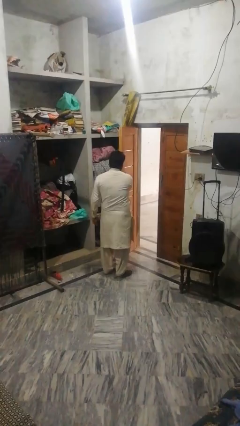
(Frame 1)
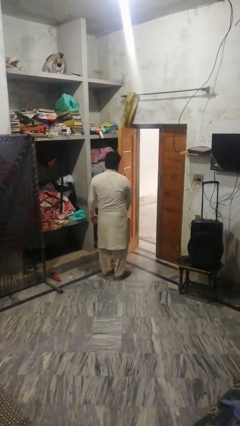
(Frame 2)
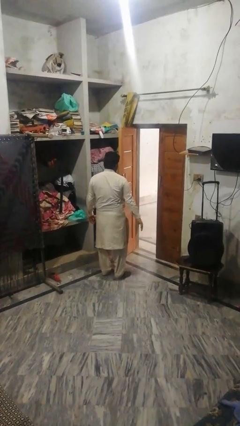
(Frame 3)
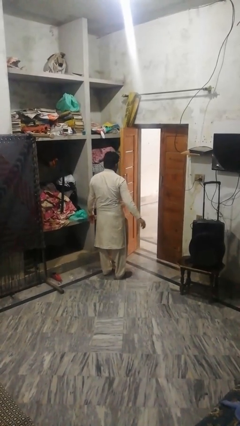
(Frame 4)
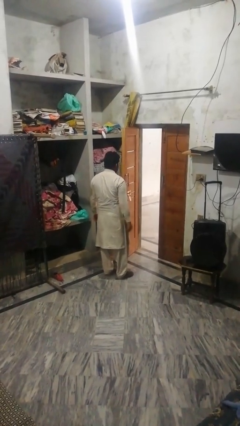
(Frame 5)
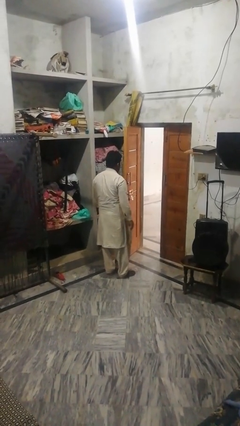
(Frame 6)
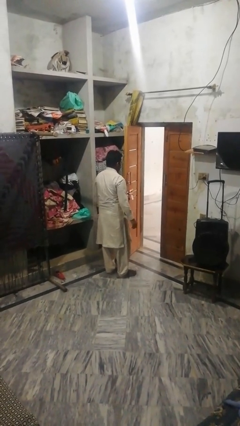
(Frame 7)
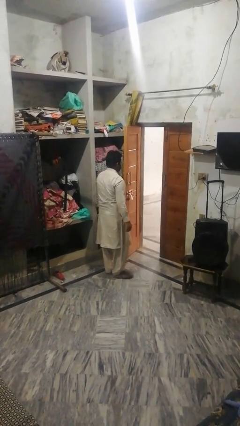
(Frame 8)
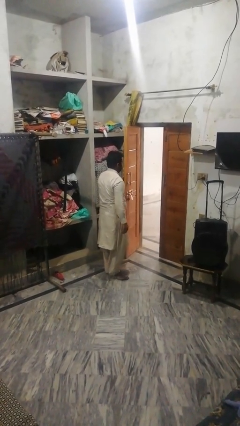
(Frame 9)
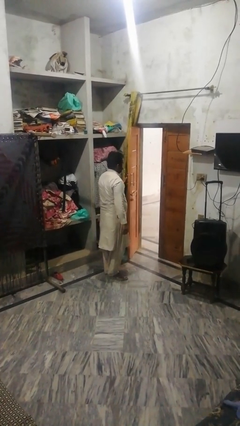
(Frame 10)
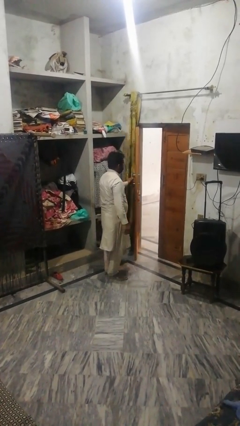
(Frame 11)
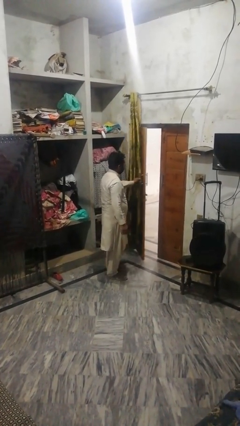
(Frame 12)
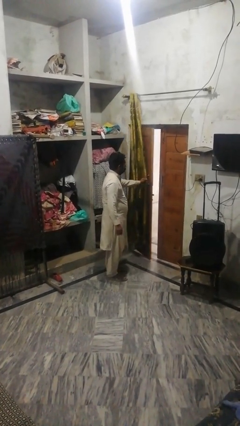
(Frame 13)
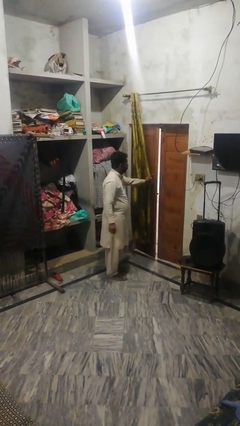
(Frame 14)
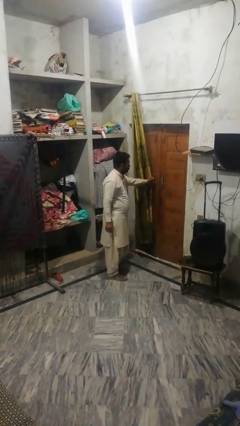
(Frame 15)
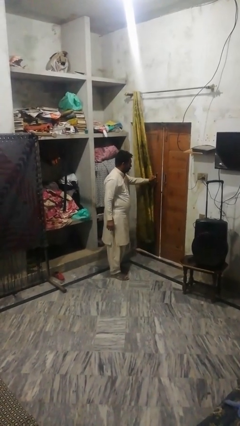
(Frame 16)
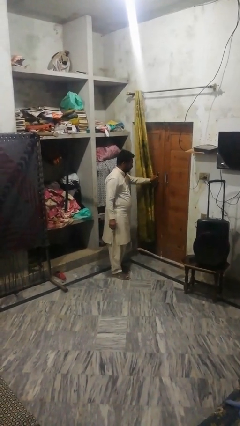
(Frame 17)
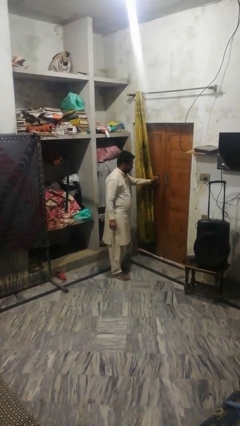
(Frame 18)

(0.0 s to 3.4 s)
person closes facility door

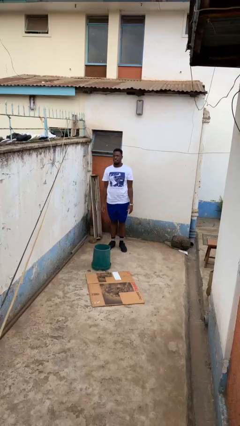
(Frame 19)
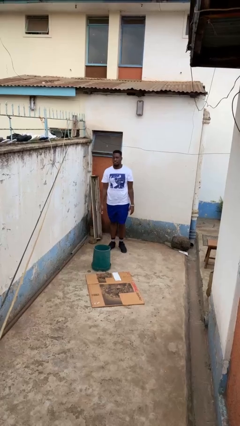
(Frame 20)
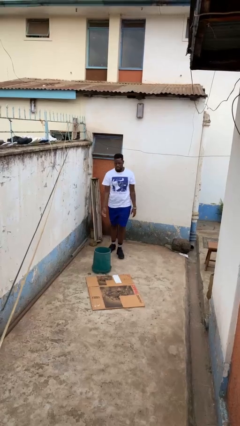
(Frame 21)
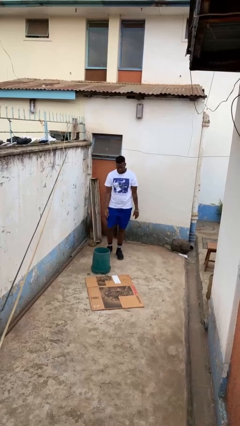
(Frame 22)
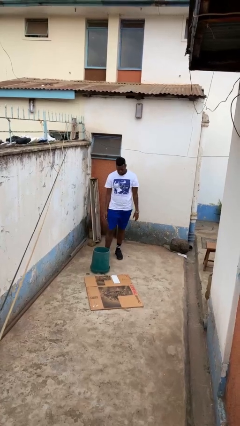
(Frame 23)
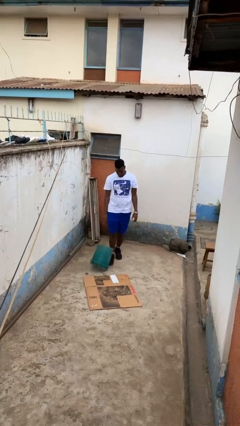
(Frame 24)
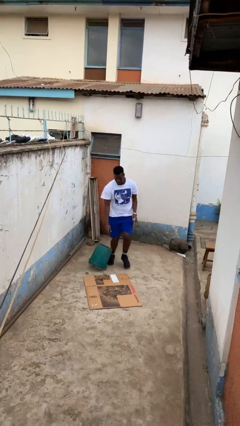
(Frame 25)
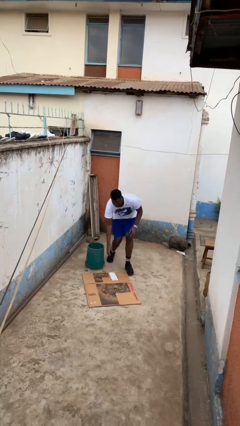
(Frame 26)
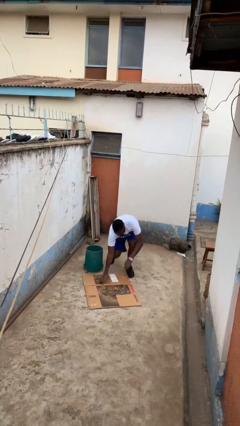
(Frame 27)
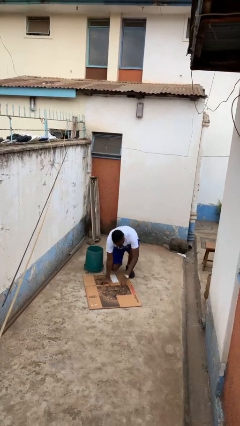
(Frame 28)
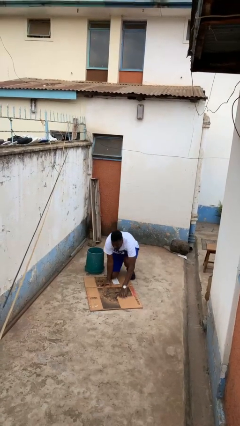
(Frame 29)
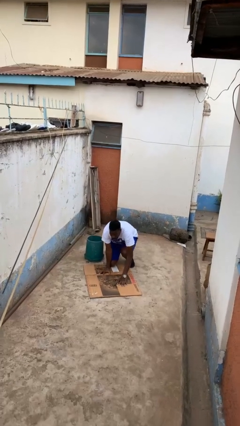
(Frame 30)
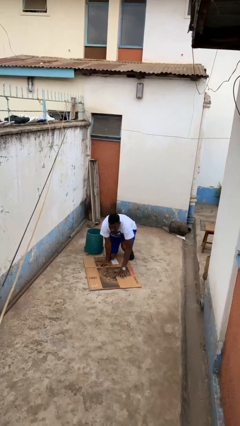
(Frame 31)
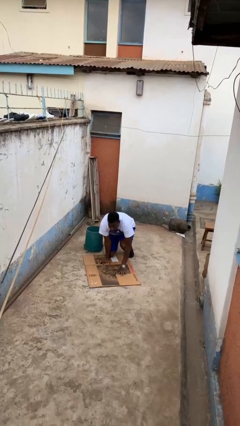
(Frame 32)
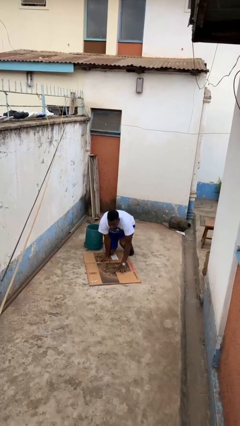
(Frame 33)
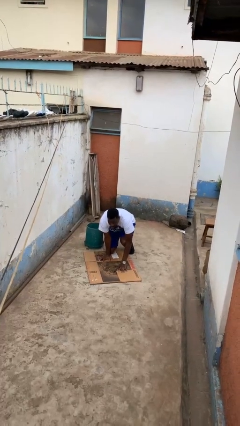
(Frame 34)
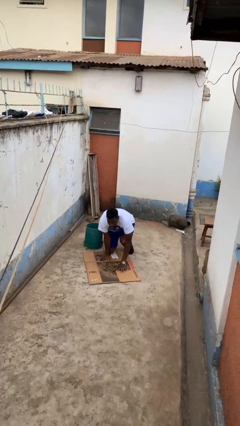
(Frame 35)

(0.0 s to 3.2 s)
person trips on object on floor

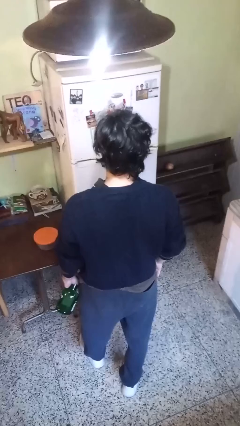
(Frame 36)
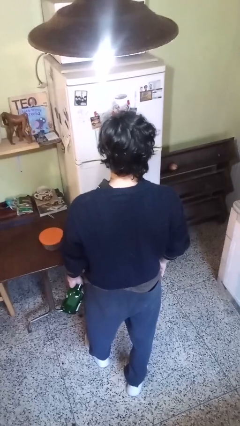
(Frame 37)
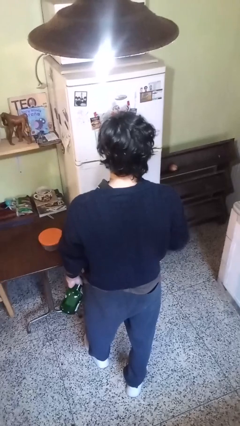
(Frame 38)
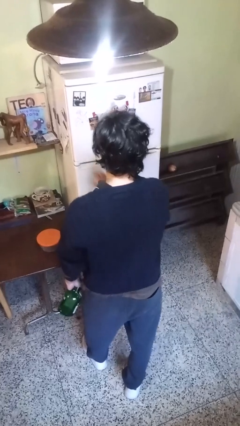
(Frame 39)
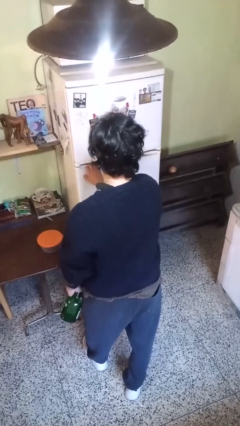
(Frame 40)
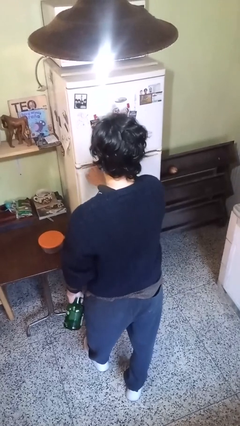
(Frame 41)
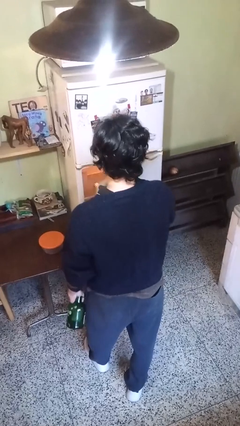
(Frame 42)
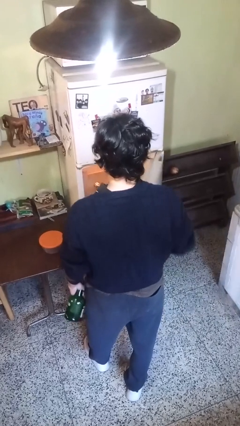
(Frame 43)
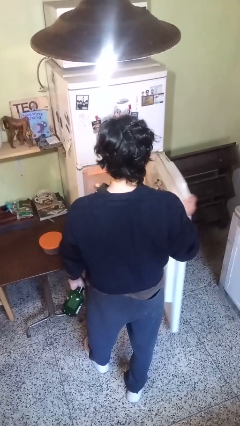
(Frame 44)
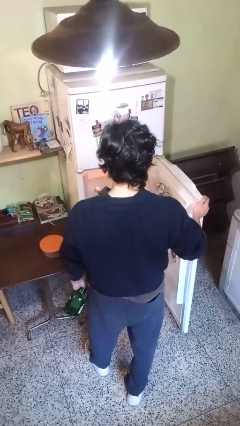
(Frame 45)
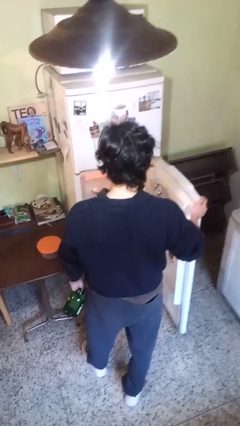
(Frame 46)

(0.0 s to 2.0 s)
person opens refrigerator

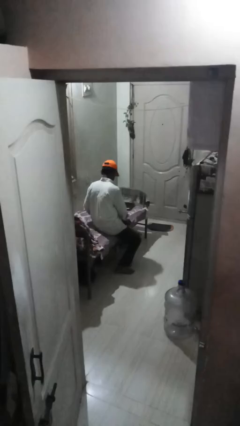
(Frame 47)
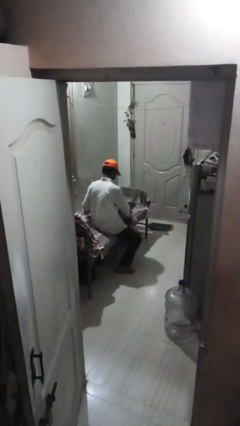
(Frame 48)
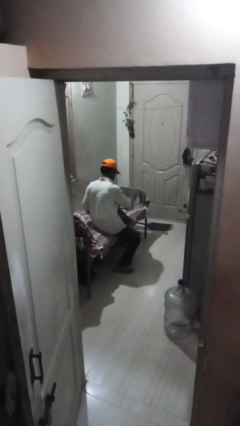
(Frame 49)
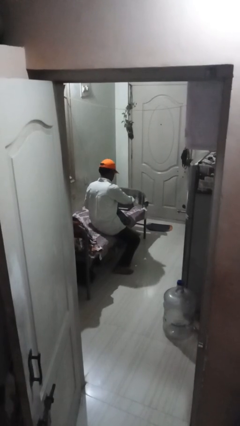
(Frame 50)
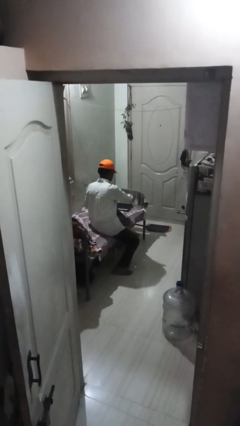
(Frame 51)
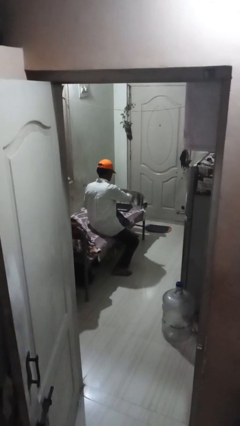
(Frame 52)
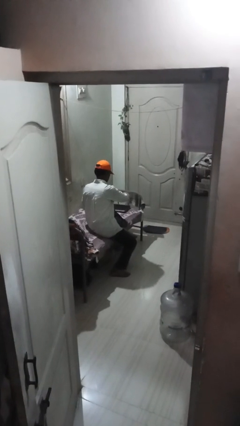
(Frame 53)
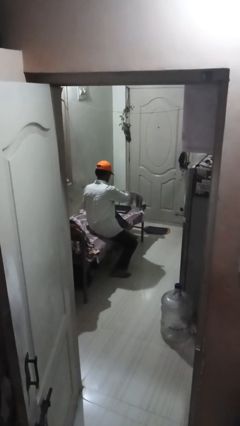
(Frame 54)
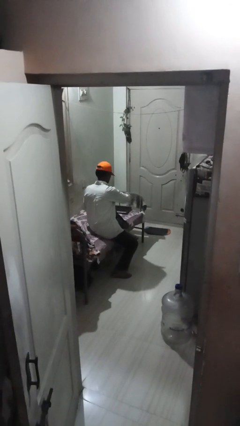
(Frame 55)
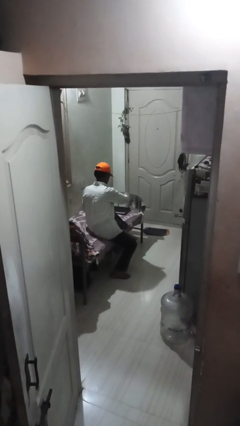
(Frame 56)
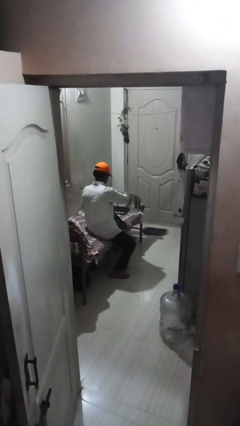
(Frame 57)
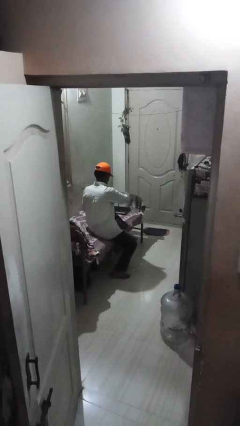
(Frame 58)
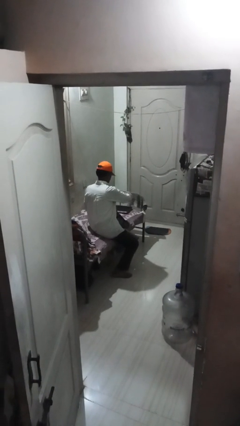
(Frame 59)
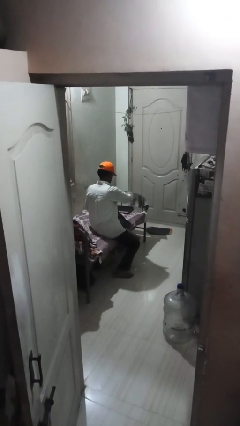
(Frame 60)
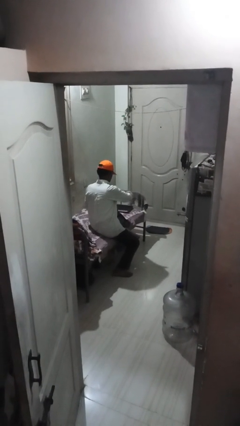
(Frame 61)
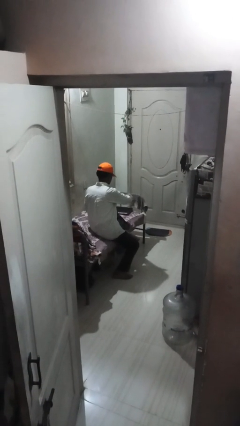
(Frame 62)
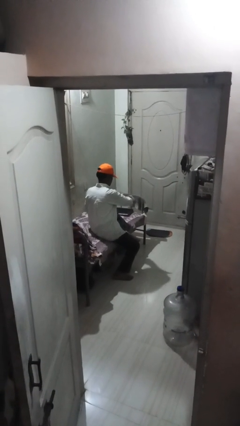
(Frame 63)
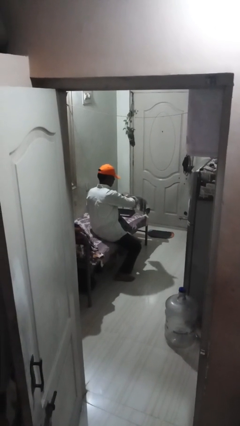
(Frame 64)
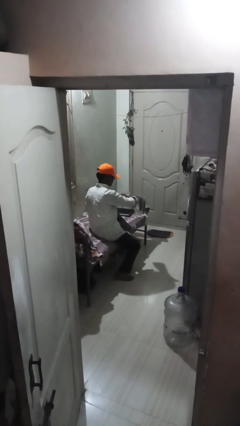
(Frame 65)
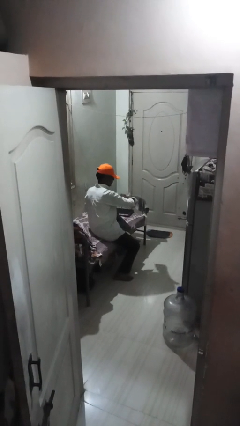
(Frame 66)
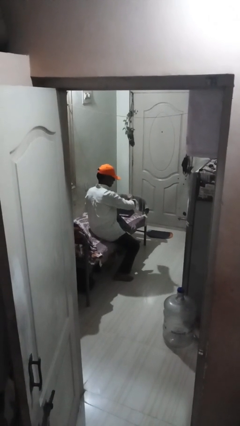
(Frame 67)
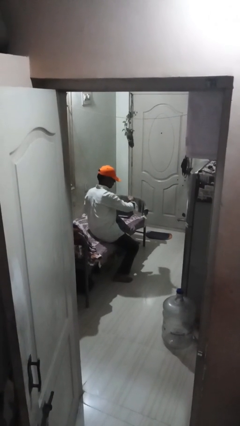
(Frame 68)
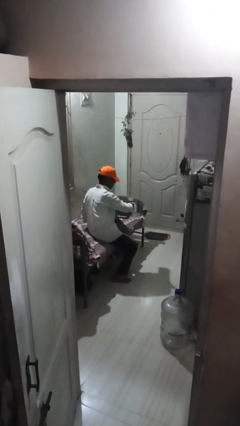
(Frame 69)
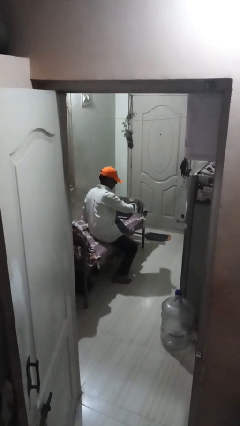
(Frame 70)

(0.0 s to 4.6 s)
person looks at wristwatch

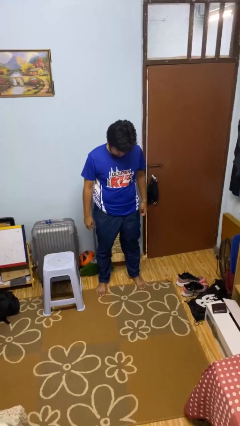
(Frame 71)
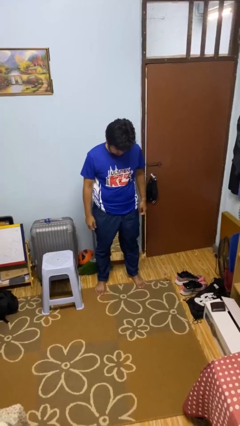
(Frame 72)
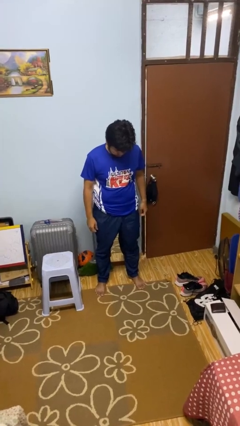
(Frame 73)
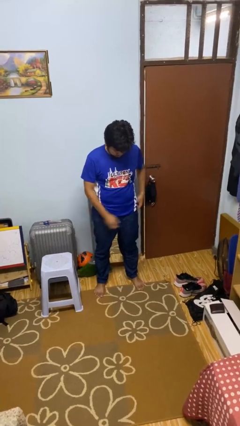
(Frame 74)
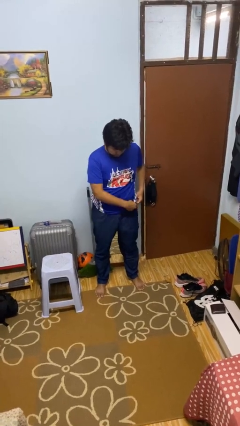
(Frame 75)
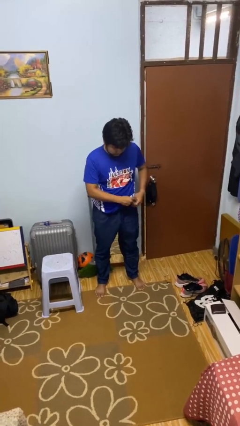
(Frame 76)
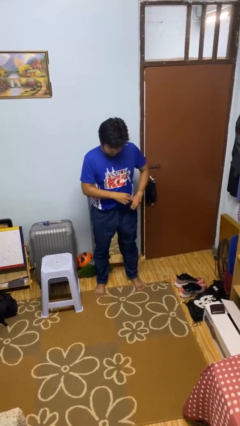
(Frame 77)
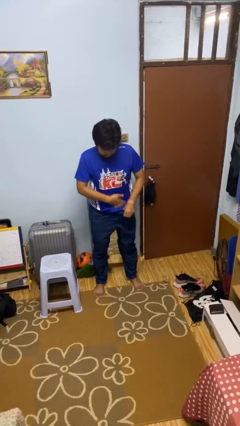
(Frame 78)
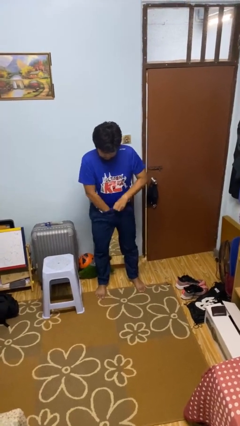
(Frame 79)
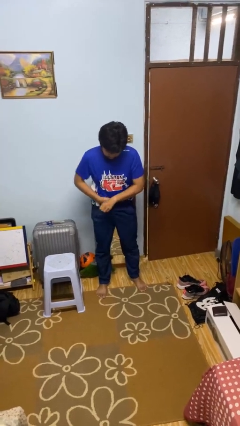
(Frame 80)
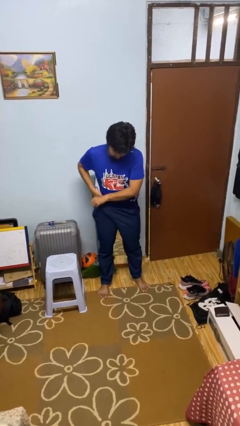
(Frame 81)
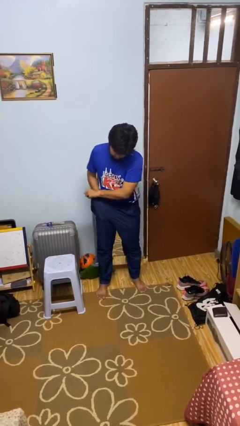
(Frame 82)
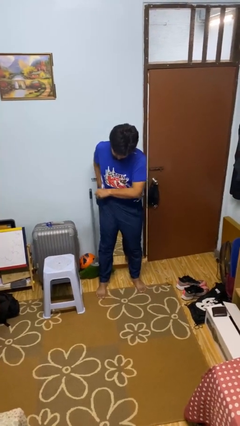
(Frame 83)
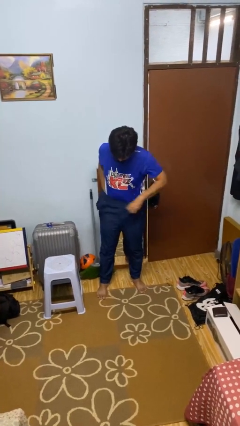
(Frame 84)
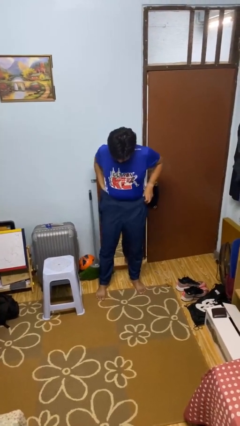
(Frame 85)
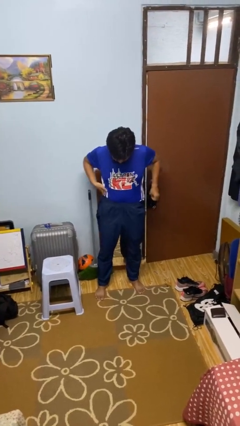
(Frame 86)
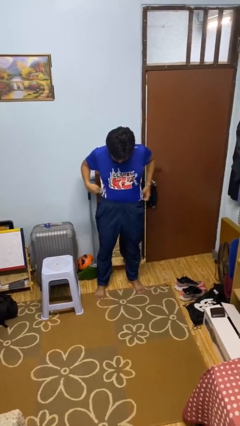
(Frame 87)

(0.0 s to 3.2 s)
person tucks in shirt

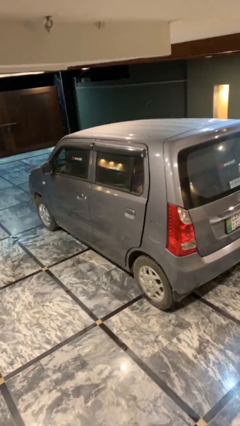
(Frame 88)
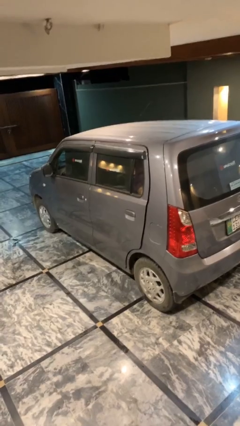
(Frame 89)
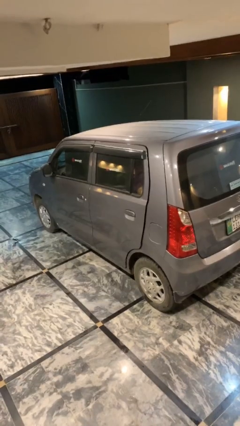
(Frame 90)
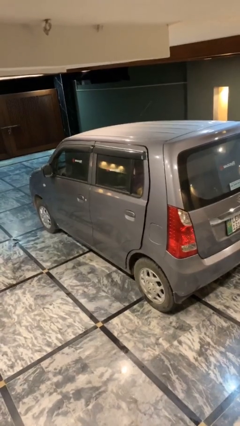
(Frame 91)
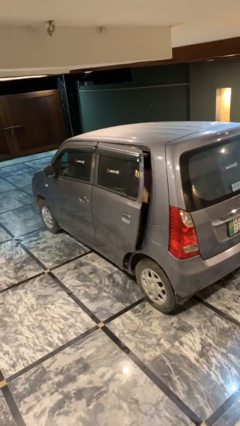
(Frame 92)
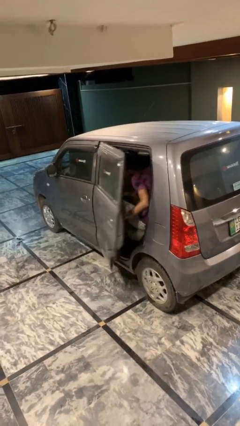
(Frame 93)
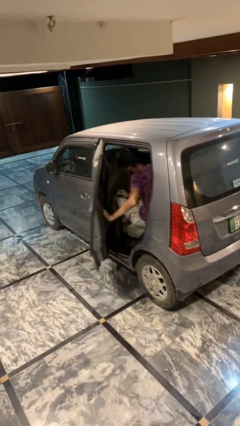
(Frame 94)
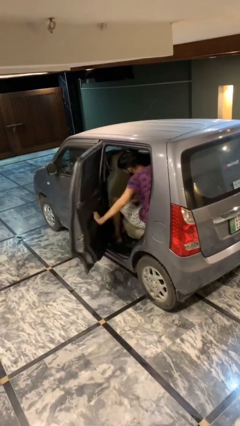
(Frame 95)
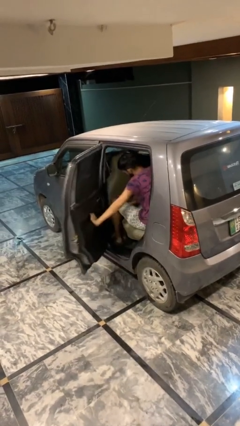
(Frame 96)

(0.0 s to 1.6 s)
person opens car door
